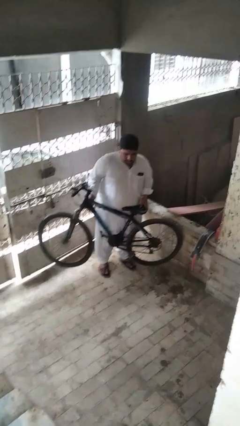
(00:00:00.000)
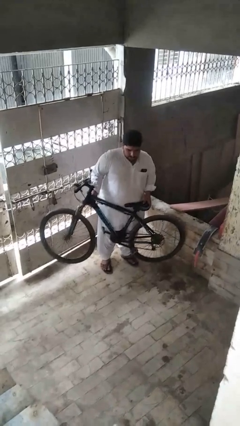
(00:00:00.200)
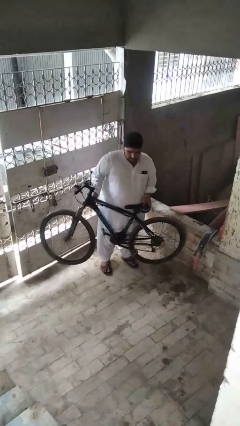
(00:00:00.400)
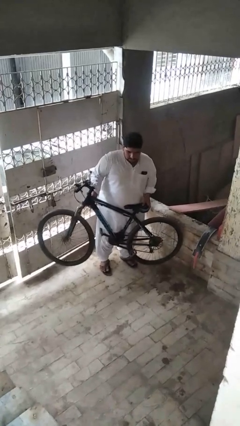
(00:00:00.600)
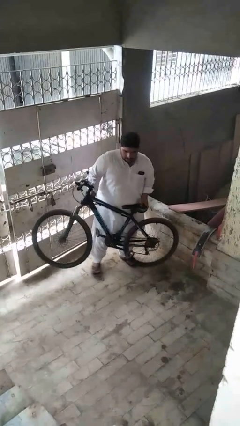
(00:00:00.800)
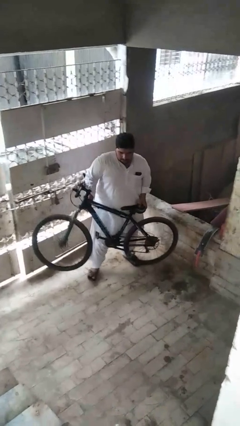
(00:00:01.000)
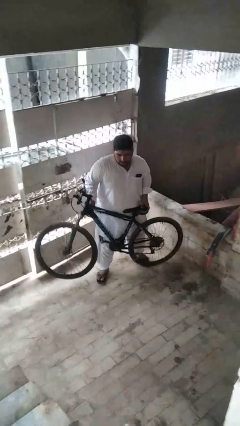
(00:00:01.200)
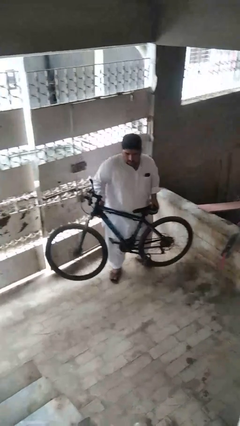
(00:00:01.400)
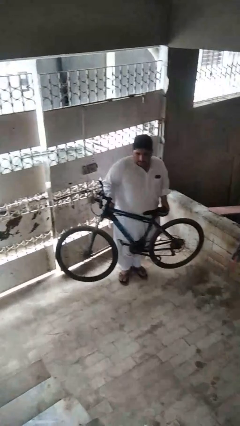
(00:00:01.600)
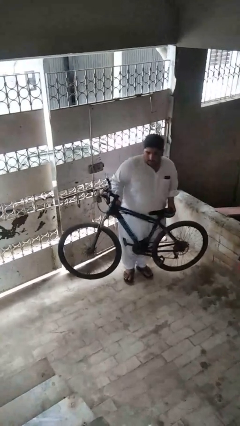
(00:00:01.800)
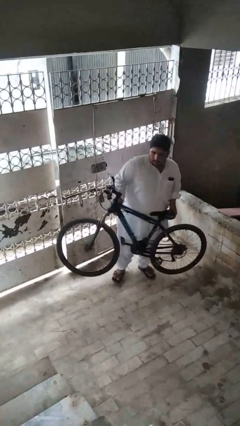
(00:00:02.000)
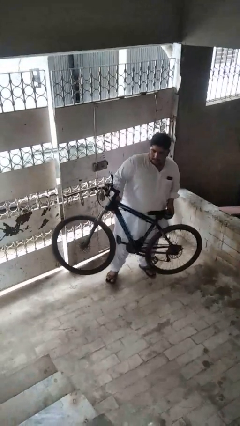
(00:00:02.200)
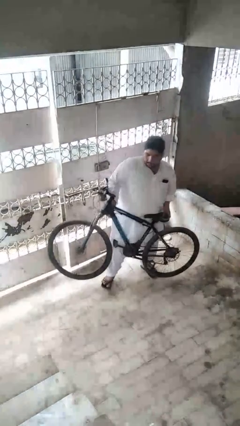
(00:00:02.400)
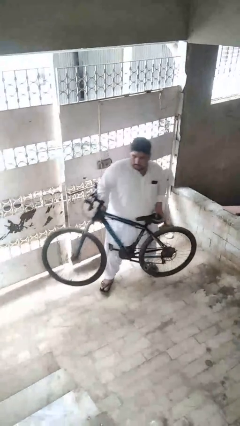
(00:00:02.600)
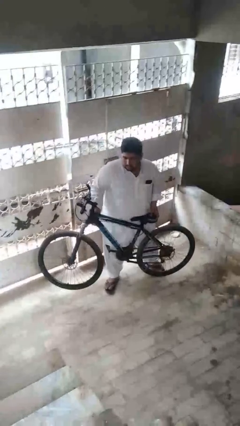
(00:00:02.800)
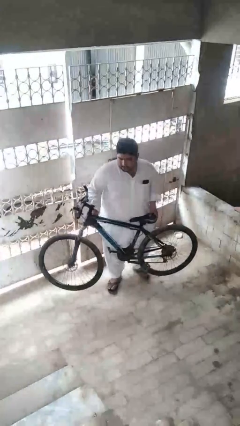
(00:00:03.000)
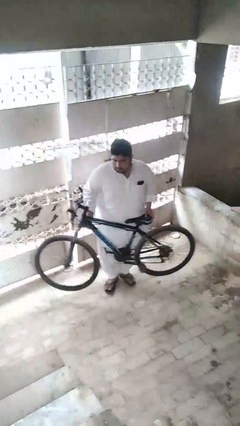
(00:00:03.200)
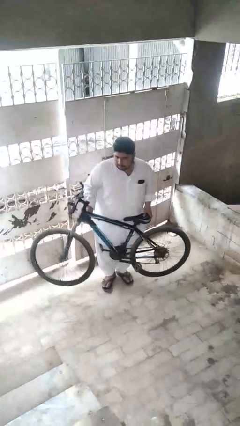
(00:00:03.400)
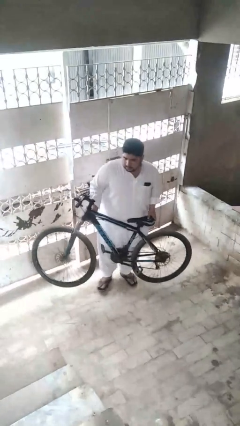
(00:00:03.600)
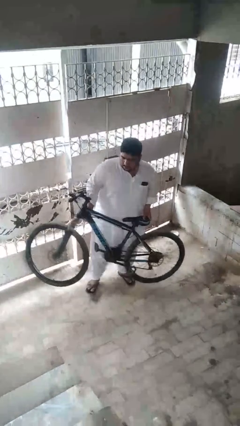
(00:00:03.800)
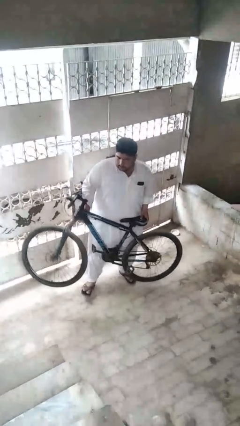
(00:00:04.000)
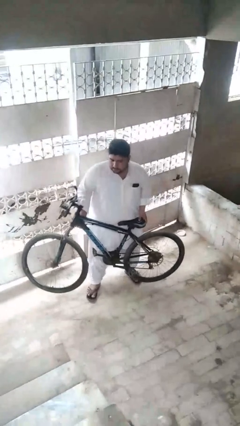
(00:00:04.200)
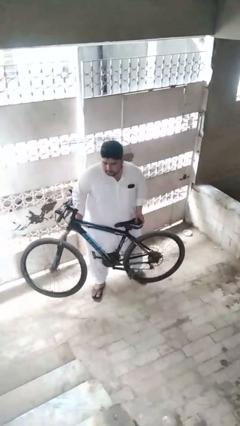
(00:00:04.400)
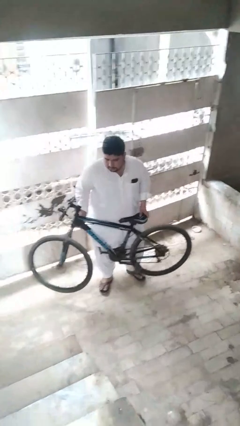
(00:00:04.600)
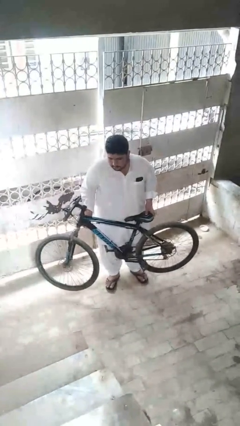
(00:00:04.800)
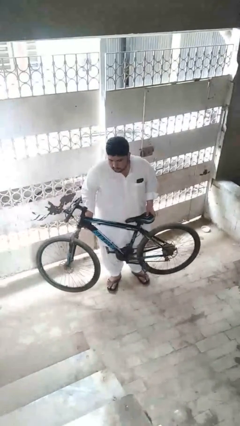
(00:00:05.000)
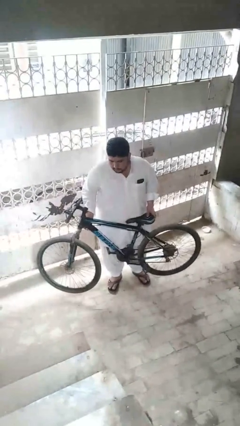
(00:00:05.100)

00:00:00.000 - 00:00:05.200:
person carries bicycle

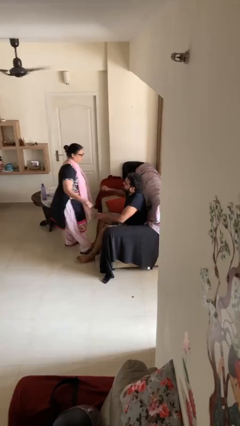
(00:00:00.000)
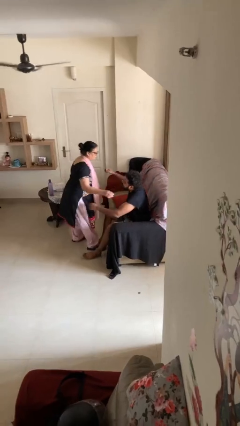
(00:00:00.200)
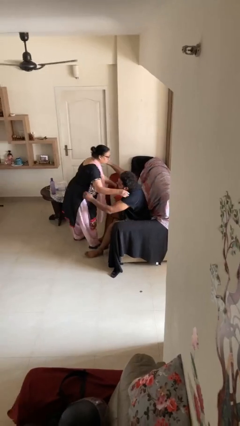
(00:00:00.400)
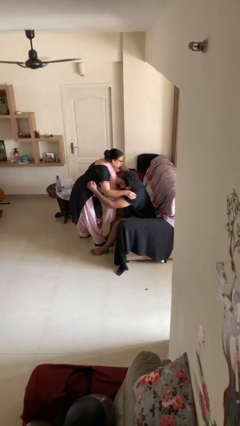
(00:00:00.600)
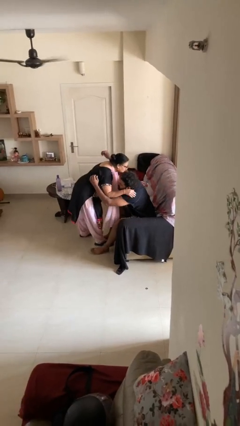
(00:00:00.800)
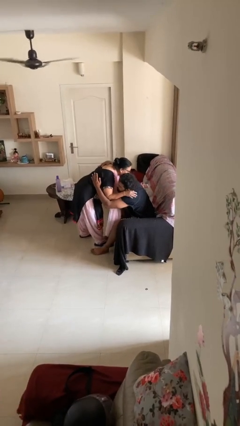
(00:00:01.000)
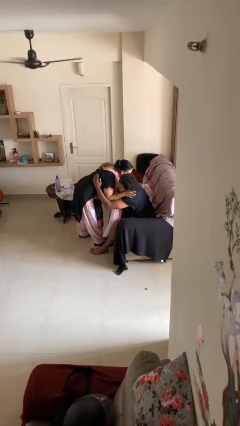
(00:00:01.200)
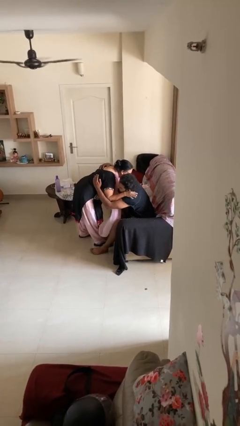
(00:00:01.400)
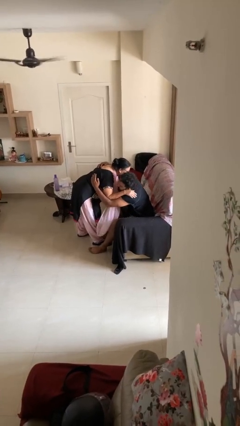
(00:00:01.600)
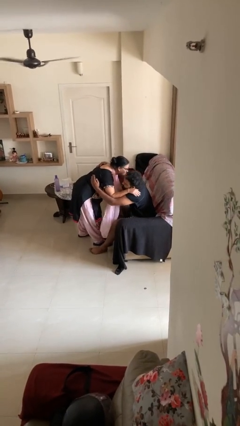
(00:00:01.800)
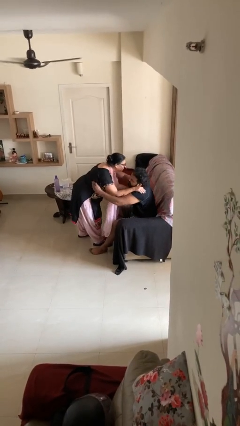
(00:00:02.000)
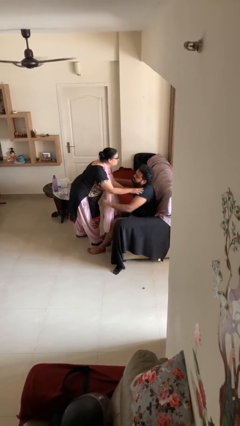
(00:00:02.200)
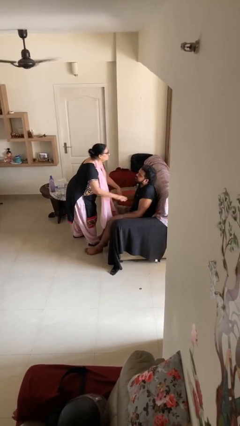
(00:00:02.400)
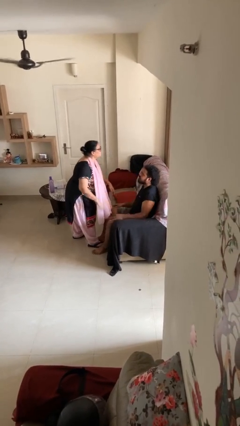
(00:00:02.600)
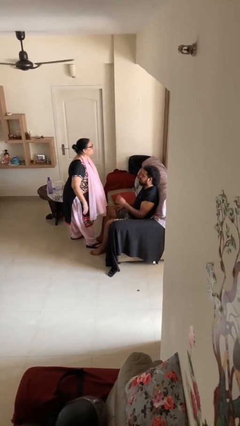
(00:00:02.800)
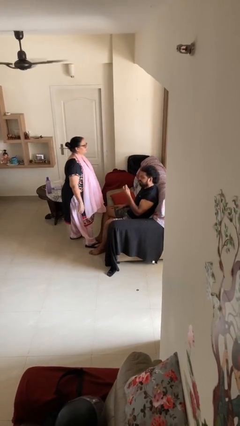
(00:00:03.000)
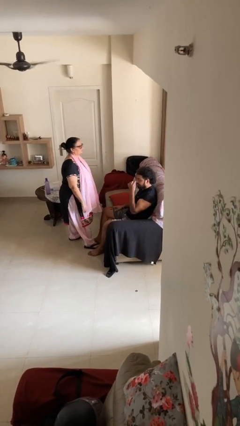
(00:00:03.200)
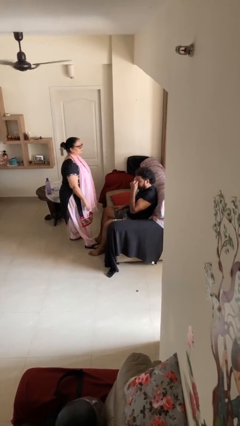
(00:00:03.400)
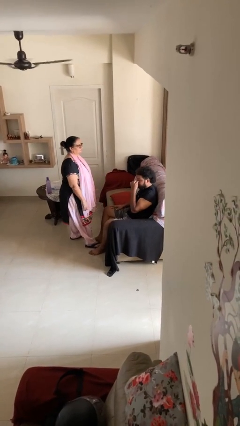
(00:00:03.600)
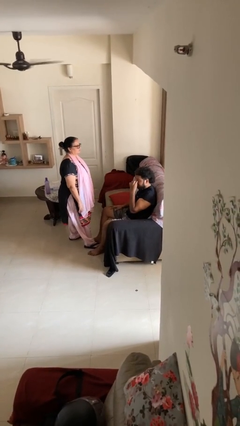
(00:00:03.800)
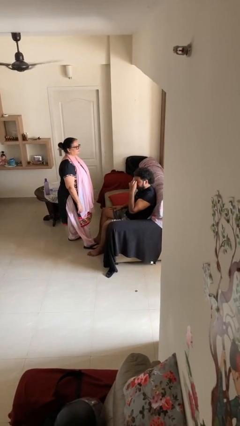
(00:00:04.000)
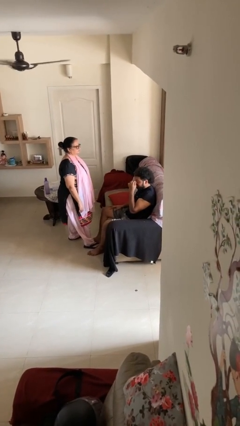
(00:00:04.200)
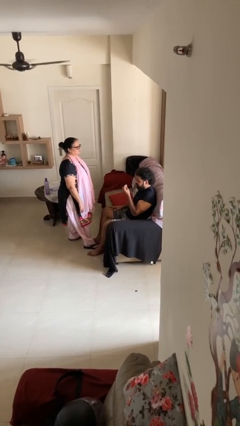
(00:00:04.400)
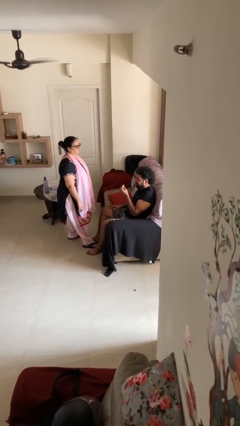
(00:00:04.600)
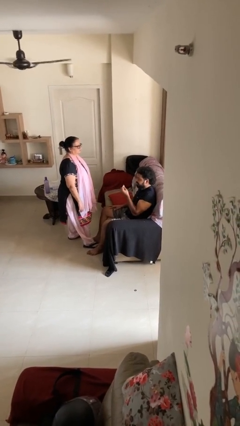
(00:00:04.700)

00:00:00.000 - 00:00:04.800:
person embraces person

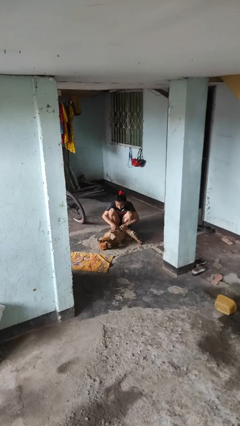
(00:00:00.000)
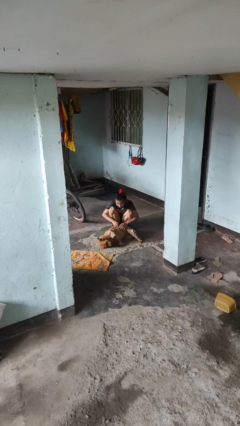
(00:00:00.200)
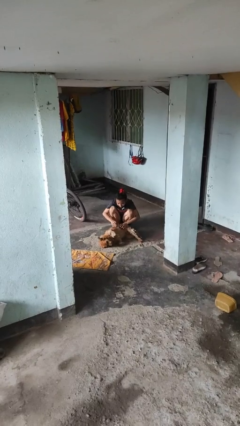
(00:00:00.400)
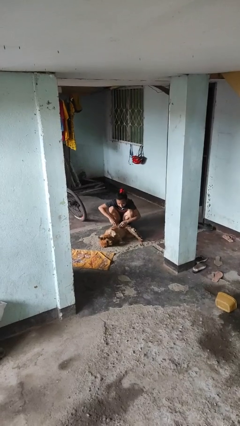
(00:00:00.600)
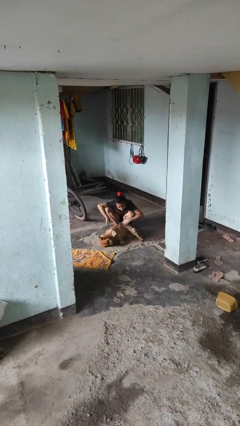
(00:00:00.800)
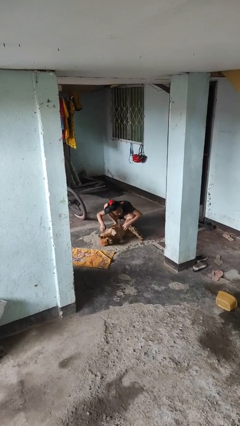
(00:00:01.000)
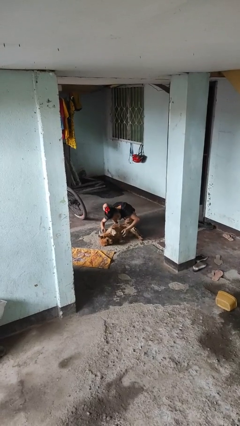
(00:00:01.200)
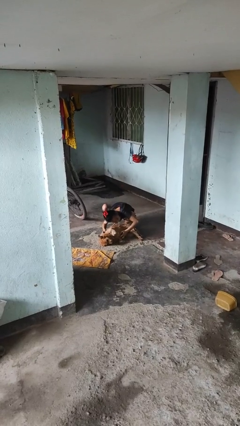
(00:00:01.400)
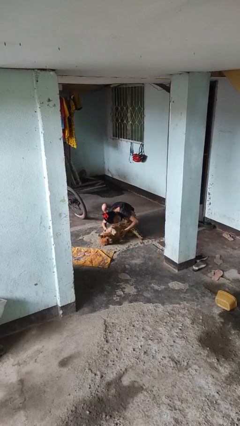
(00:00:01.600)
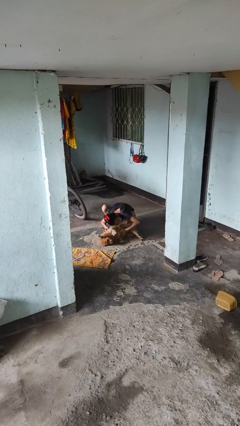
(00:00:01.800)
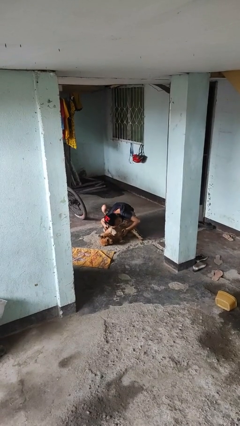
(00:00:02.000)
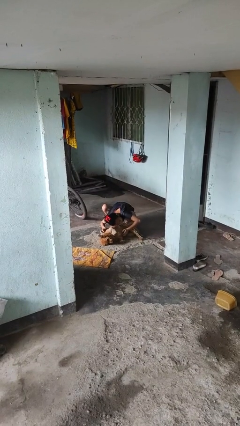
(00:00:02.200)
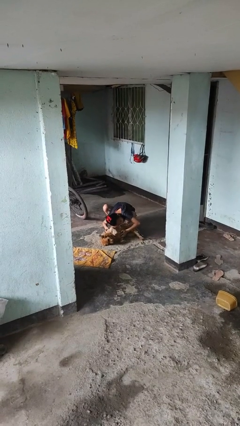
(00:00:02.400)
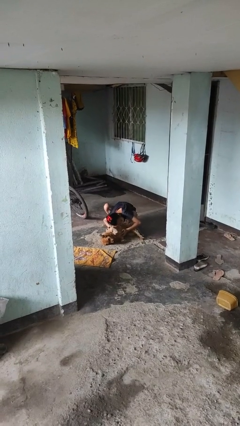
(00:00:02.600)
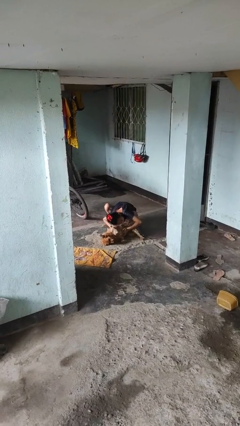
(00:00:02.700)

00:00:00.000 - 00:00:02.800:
person hugs dog

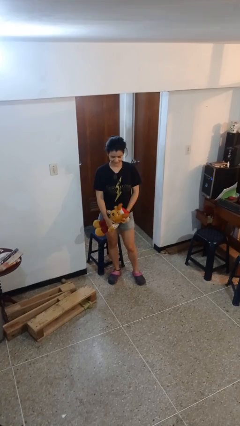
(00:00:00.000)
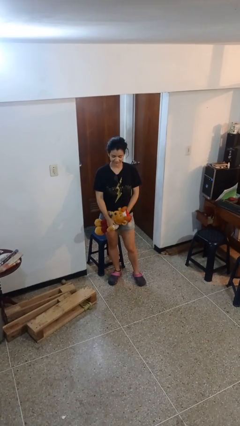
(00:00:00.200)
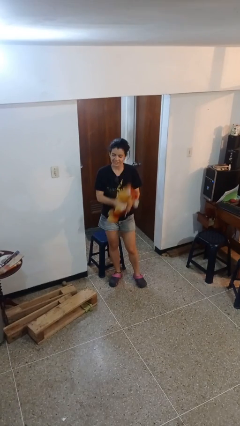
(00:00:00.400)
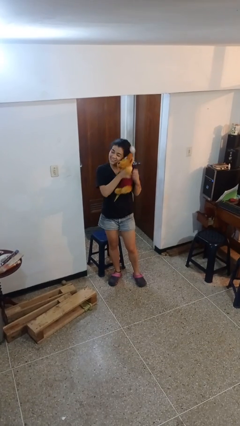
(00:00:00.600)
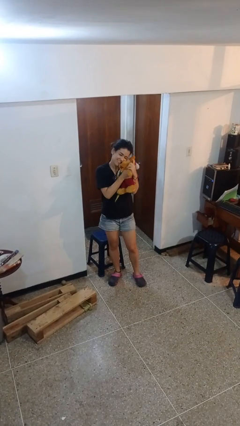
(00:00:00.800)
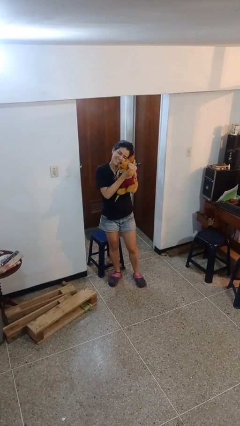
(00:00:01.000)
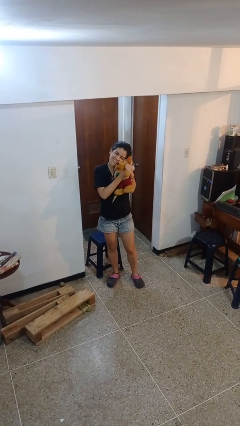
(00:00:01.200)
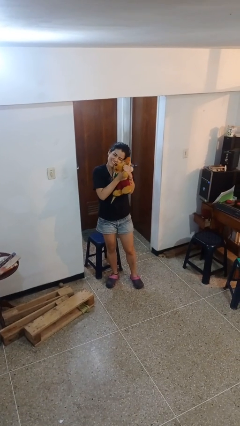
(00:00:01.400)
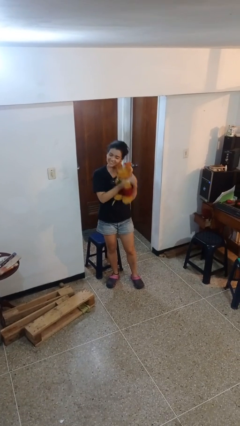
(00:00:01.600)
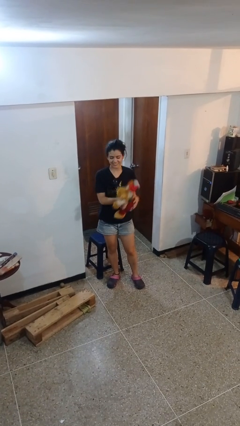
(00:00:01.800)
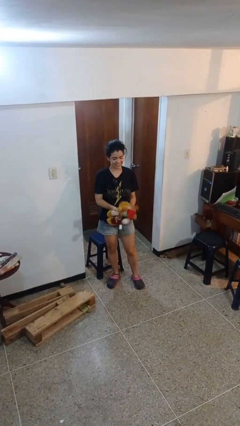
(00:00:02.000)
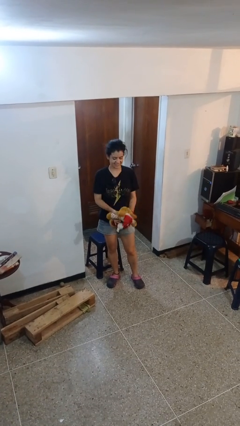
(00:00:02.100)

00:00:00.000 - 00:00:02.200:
person hugs stuffed animal

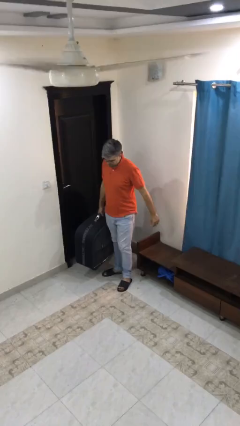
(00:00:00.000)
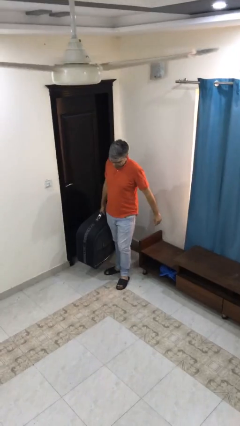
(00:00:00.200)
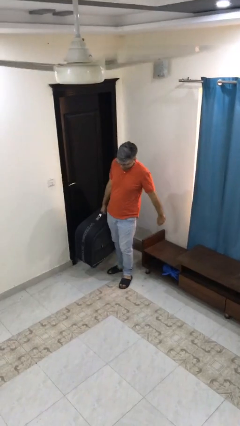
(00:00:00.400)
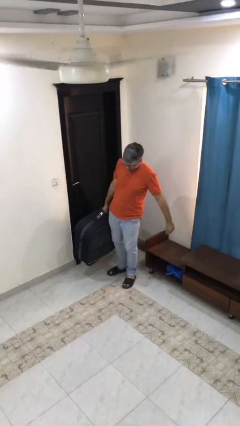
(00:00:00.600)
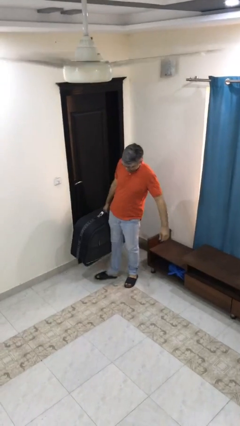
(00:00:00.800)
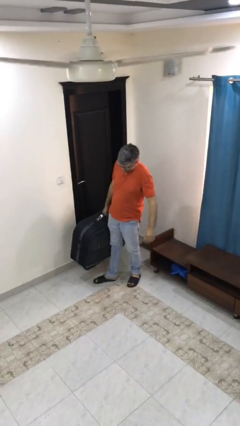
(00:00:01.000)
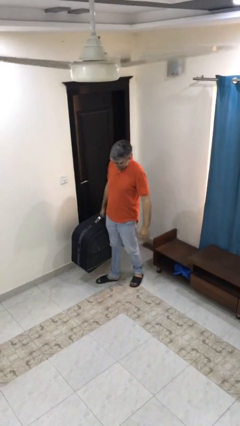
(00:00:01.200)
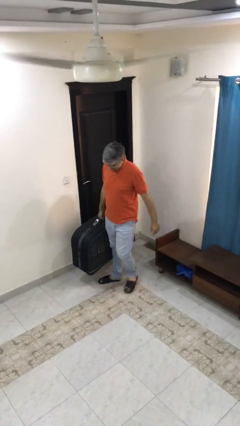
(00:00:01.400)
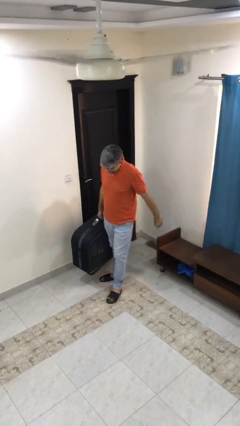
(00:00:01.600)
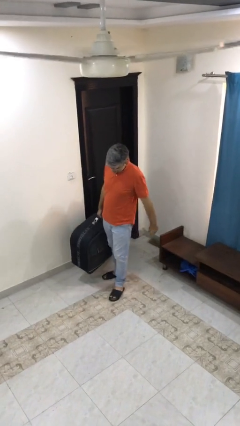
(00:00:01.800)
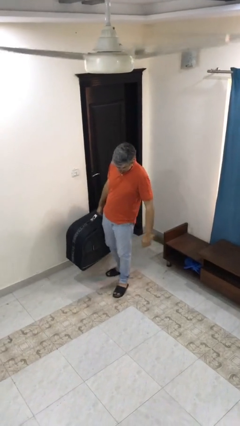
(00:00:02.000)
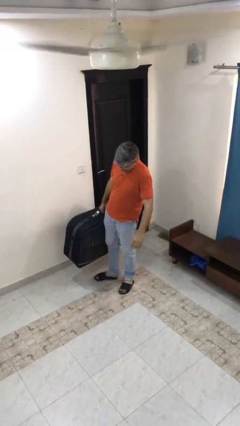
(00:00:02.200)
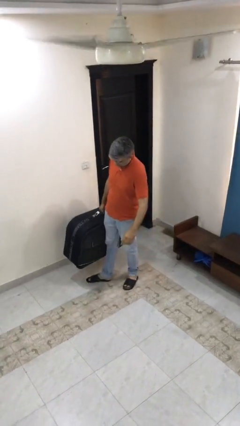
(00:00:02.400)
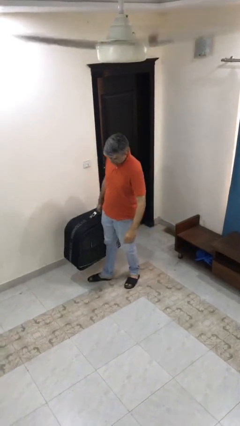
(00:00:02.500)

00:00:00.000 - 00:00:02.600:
person carries heavy object
